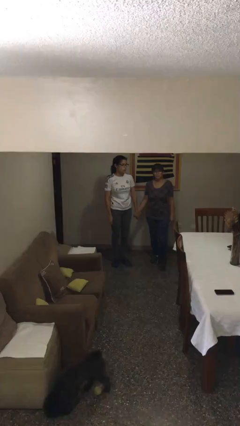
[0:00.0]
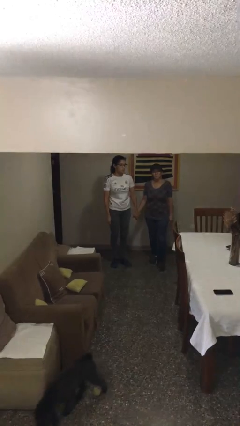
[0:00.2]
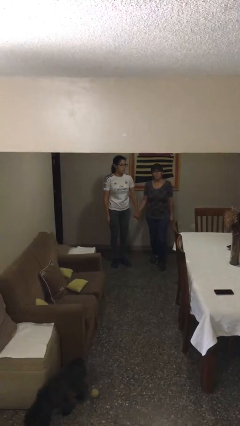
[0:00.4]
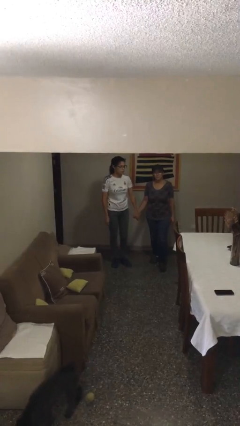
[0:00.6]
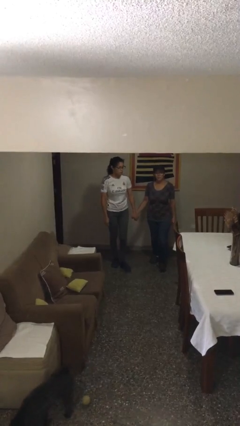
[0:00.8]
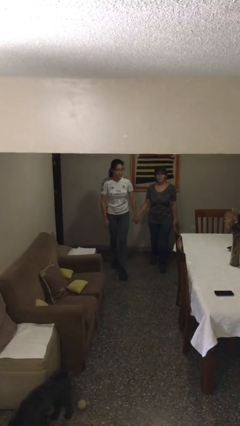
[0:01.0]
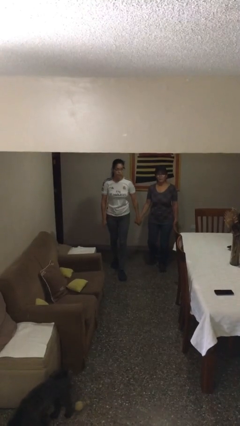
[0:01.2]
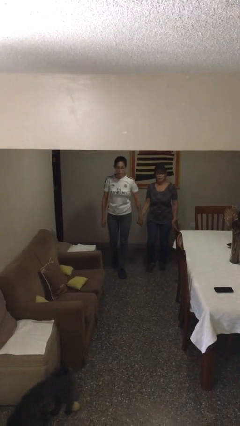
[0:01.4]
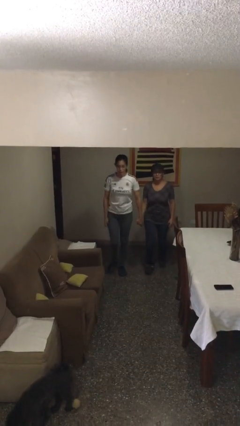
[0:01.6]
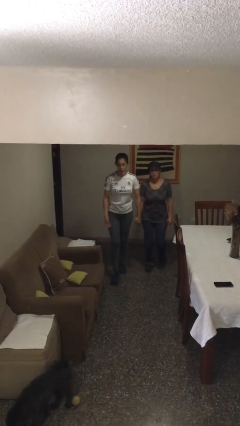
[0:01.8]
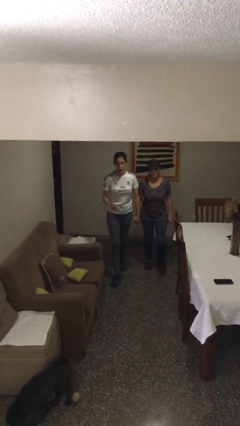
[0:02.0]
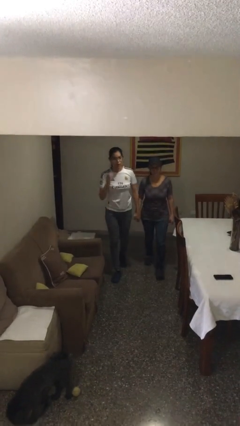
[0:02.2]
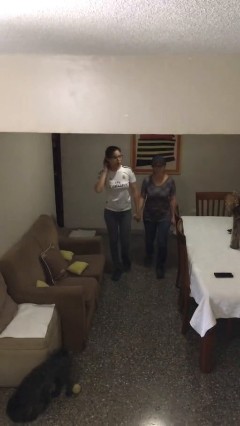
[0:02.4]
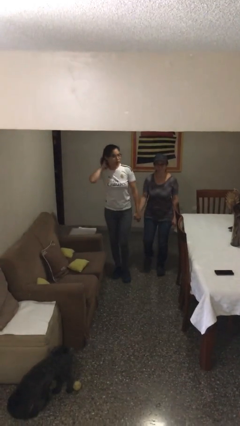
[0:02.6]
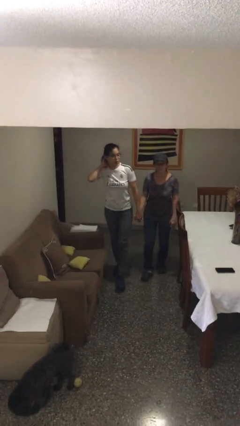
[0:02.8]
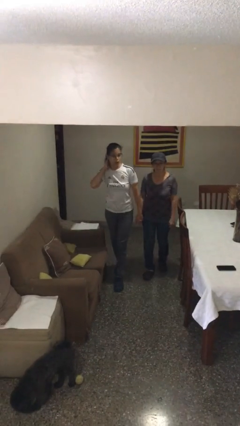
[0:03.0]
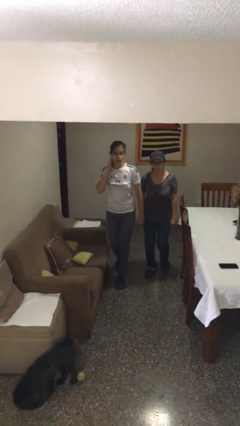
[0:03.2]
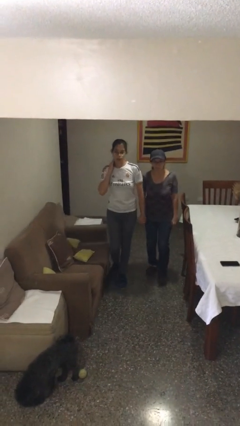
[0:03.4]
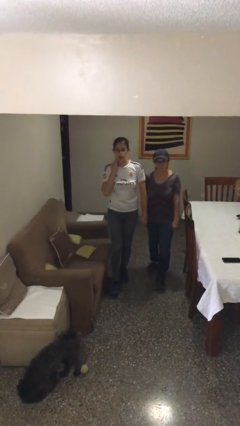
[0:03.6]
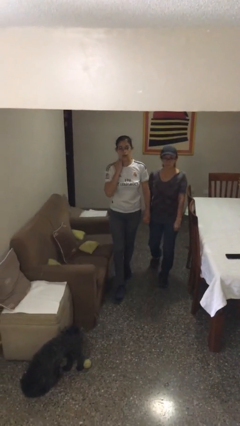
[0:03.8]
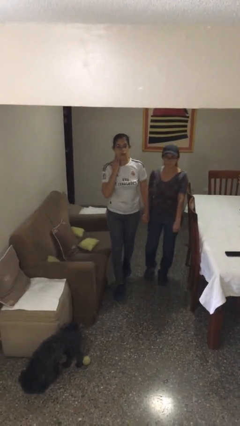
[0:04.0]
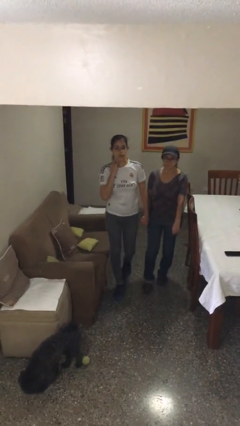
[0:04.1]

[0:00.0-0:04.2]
person holds hand

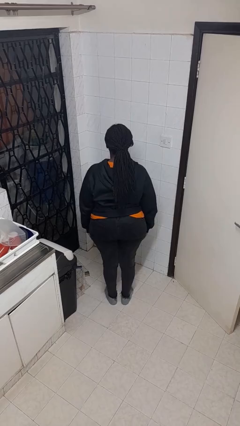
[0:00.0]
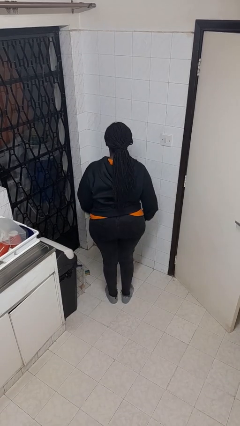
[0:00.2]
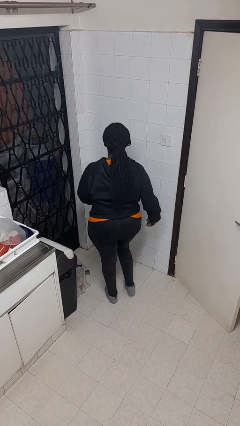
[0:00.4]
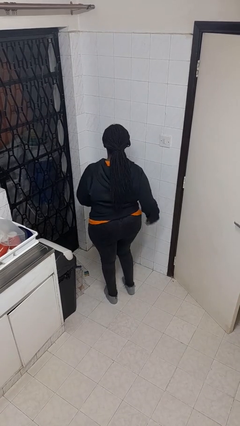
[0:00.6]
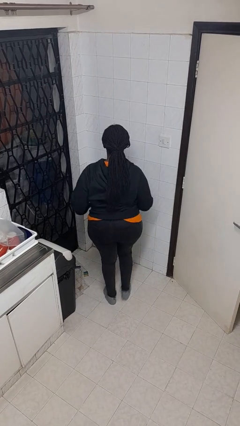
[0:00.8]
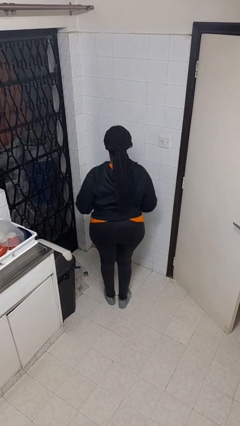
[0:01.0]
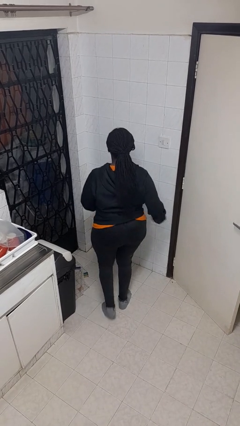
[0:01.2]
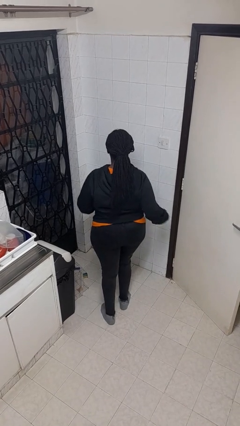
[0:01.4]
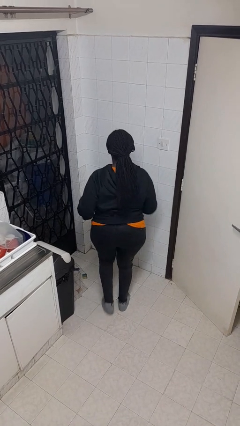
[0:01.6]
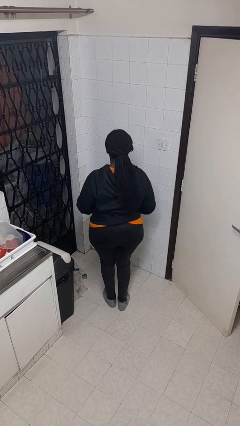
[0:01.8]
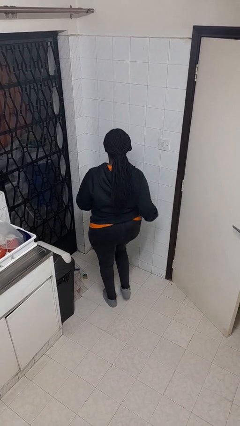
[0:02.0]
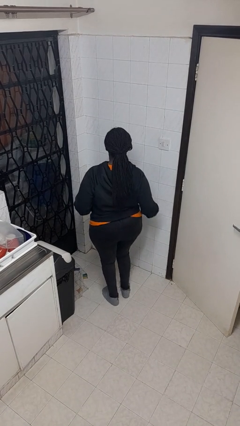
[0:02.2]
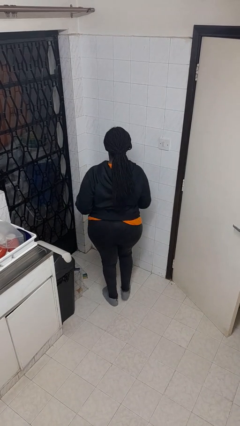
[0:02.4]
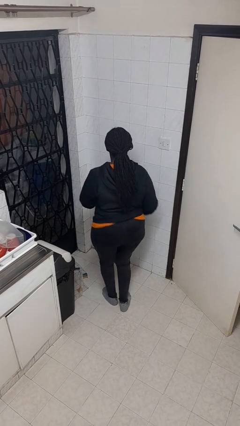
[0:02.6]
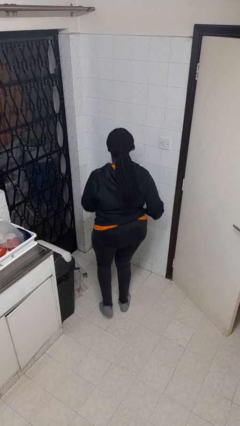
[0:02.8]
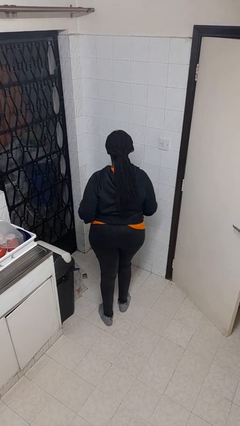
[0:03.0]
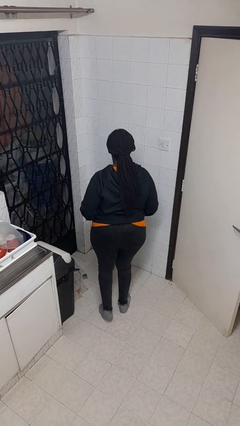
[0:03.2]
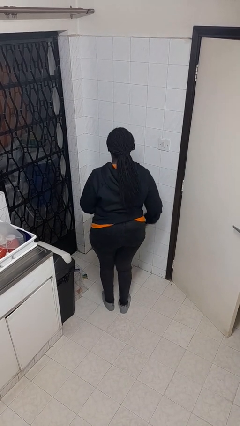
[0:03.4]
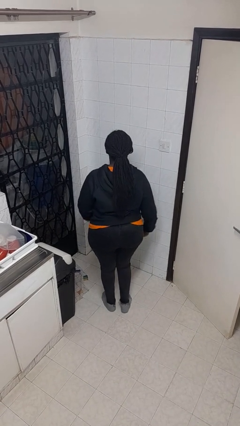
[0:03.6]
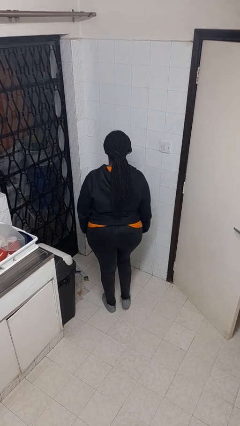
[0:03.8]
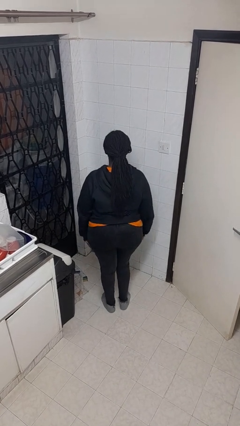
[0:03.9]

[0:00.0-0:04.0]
person dances in place

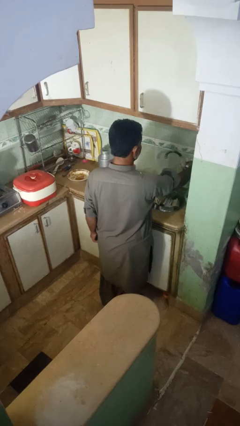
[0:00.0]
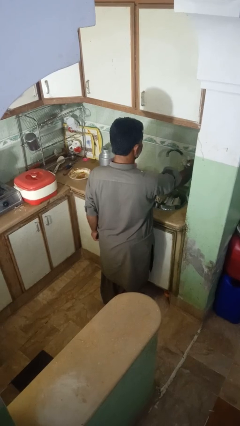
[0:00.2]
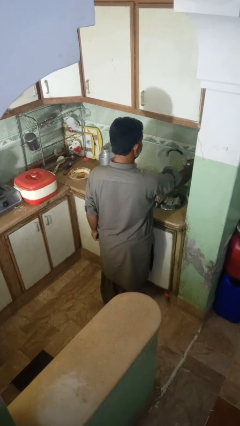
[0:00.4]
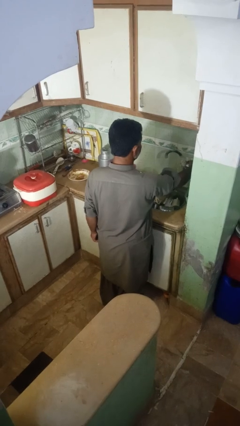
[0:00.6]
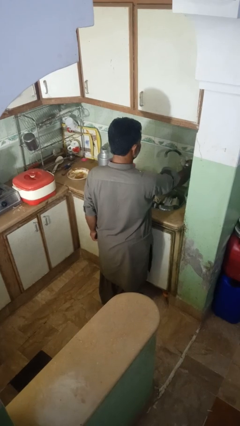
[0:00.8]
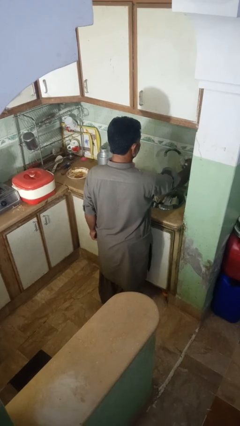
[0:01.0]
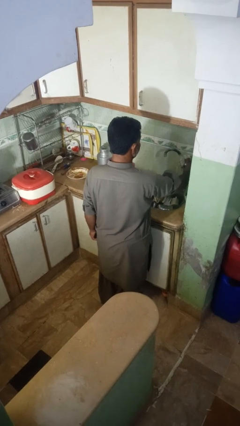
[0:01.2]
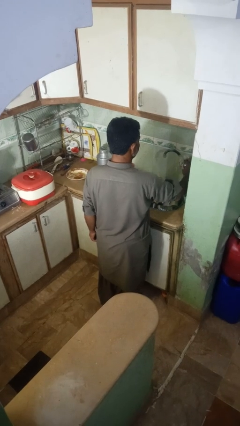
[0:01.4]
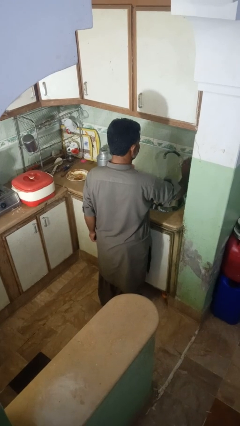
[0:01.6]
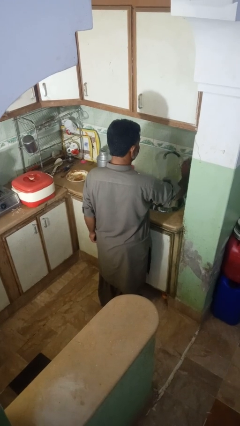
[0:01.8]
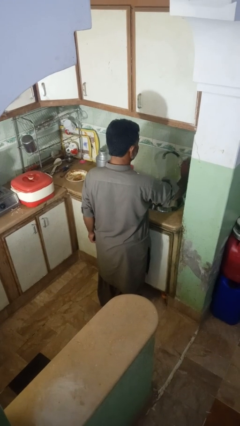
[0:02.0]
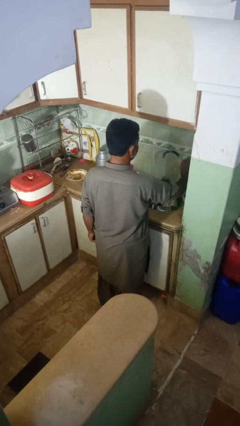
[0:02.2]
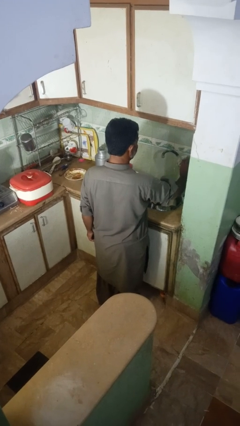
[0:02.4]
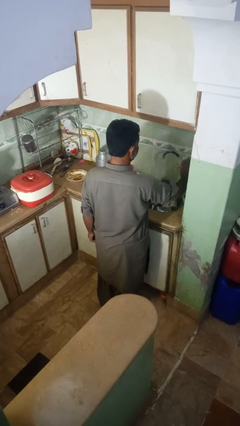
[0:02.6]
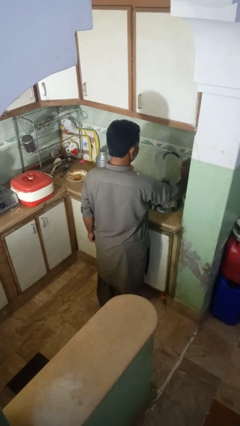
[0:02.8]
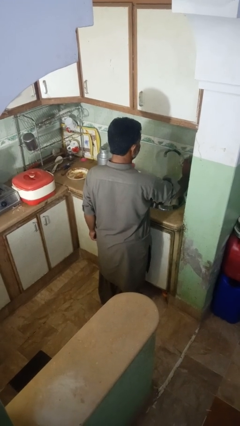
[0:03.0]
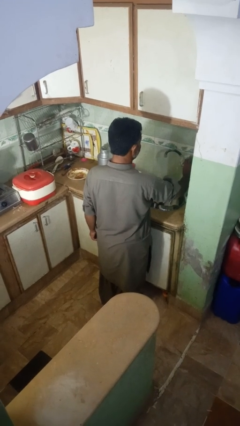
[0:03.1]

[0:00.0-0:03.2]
person turns on faucet

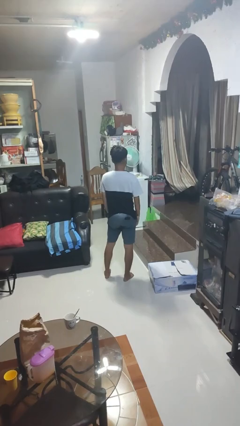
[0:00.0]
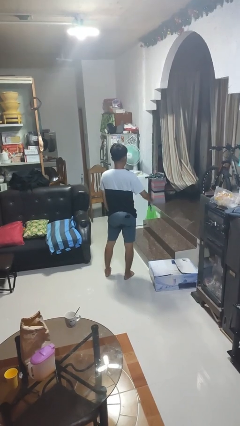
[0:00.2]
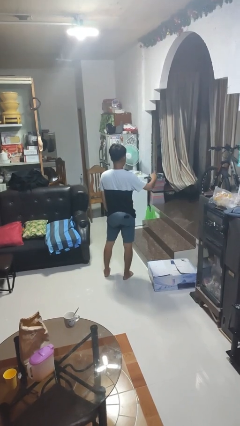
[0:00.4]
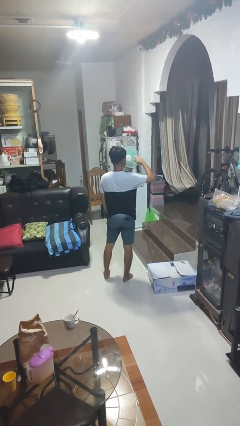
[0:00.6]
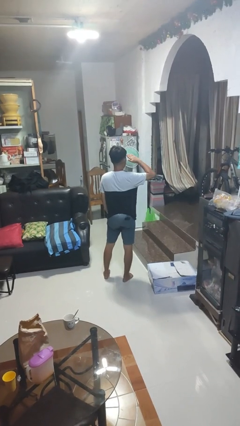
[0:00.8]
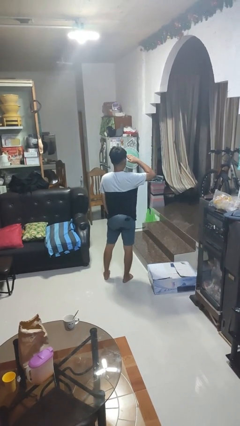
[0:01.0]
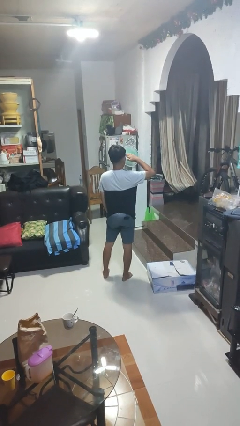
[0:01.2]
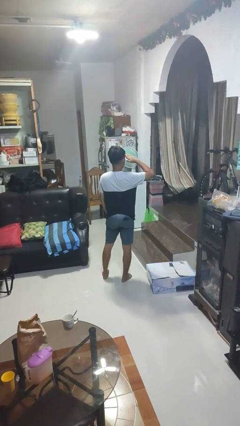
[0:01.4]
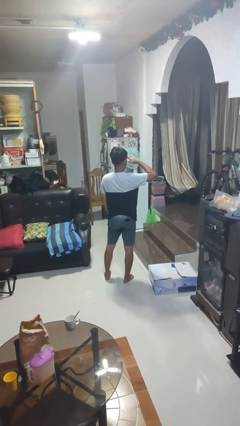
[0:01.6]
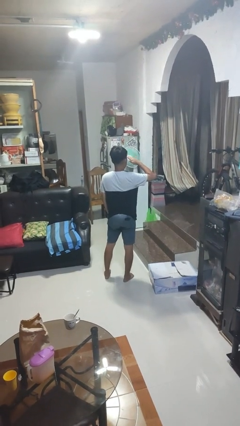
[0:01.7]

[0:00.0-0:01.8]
person salutes

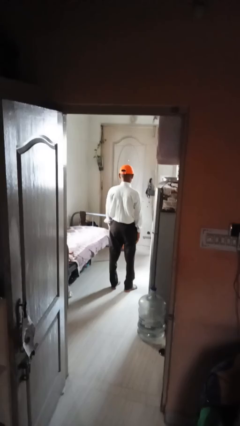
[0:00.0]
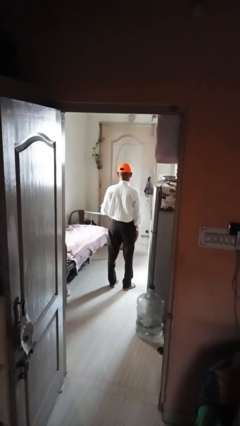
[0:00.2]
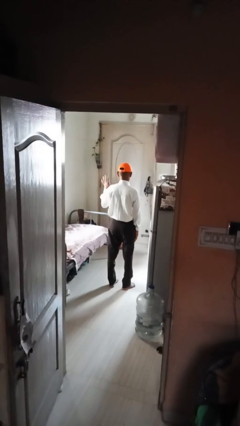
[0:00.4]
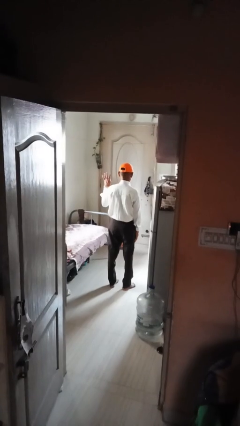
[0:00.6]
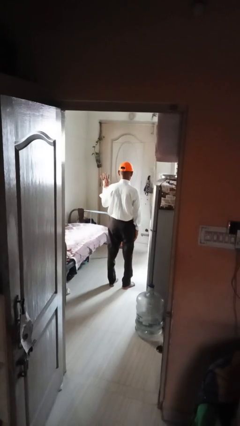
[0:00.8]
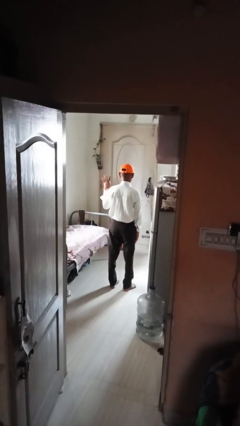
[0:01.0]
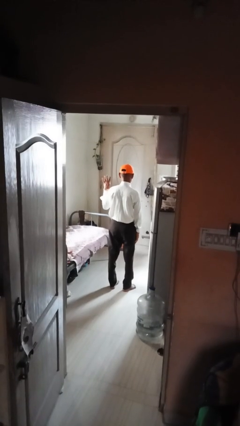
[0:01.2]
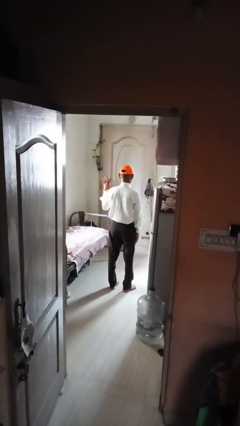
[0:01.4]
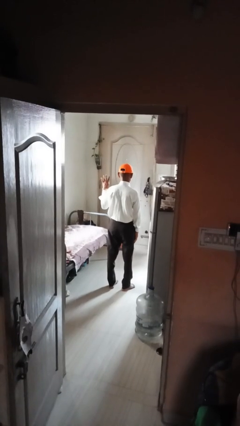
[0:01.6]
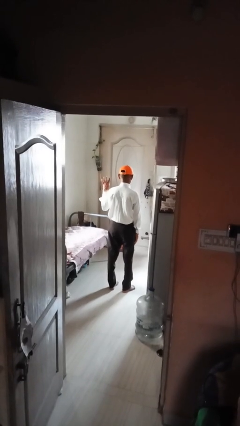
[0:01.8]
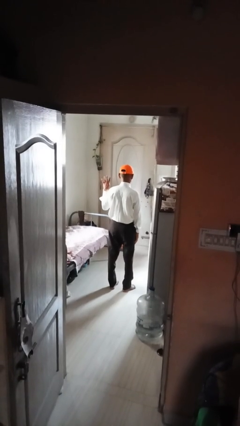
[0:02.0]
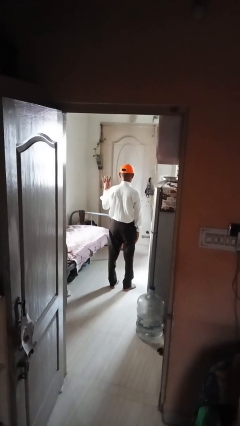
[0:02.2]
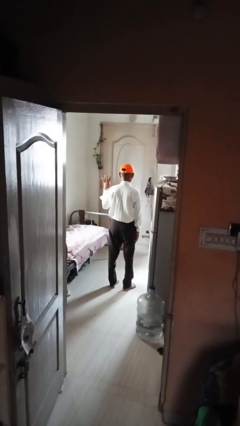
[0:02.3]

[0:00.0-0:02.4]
person gestures number four

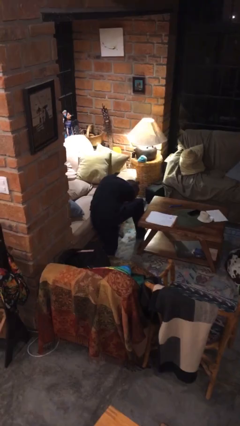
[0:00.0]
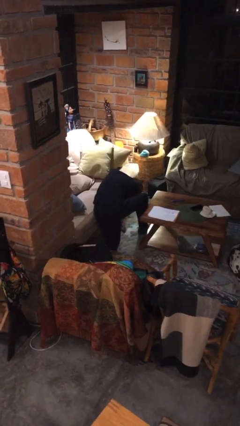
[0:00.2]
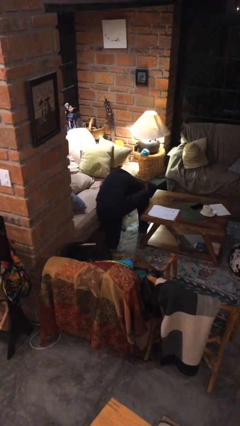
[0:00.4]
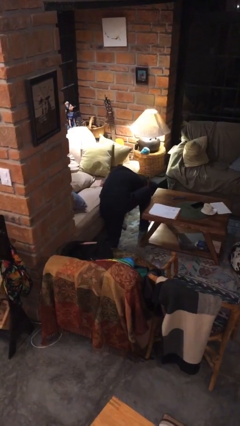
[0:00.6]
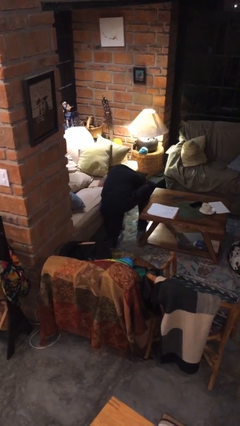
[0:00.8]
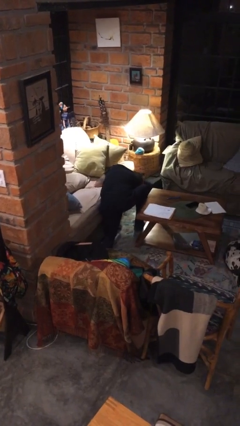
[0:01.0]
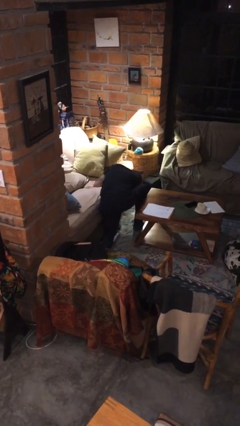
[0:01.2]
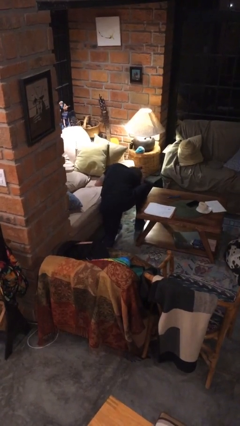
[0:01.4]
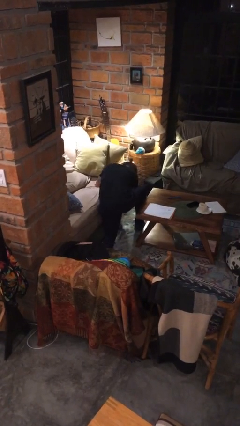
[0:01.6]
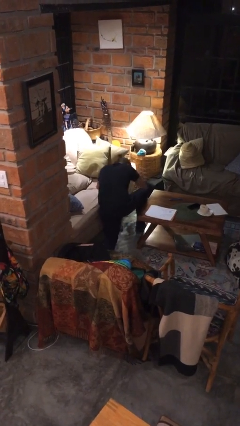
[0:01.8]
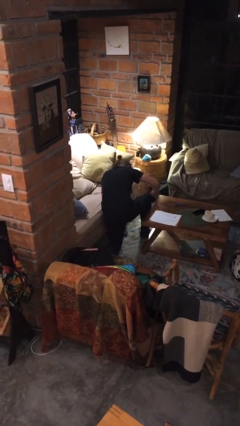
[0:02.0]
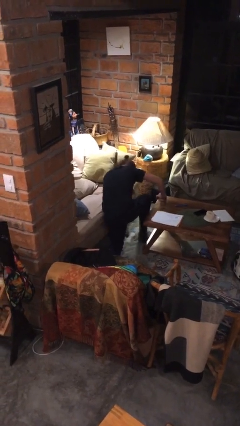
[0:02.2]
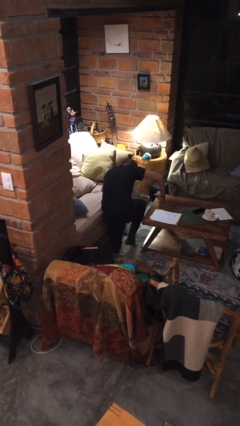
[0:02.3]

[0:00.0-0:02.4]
person searches under couch
